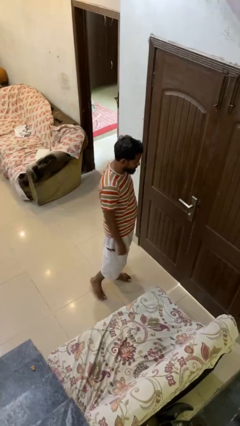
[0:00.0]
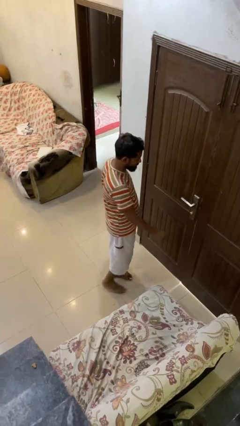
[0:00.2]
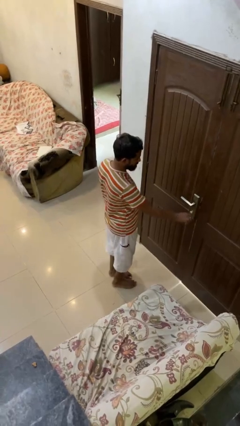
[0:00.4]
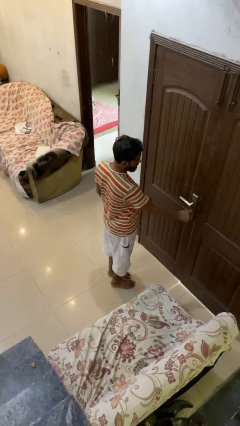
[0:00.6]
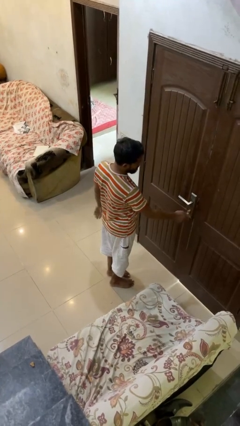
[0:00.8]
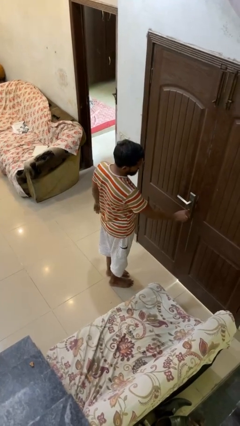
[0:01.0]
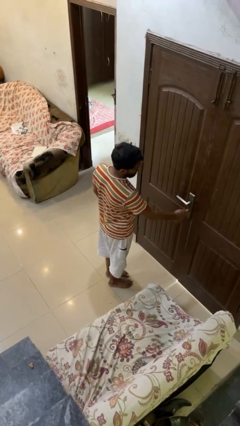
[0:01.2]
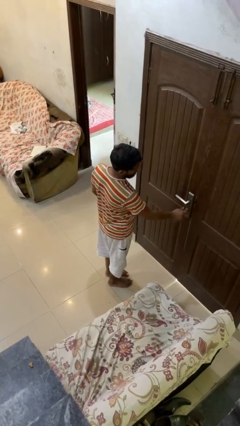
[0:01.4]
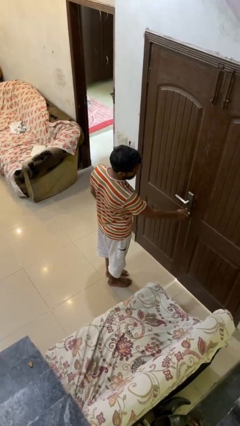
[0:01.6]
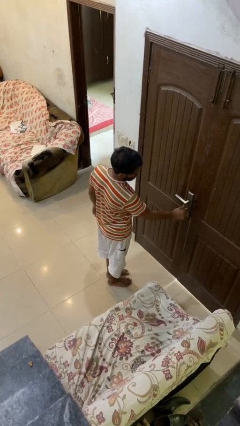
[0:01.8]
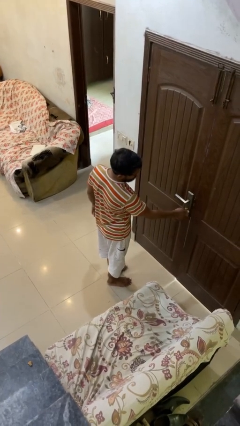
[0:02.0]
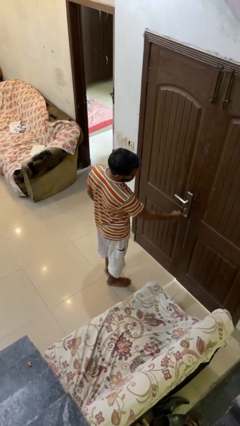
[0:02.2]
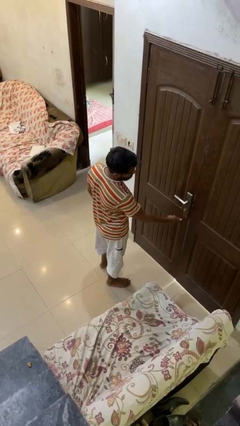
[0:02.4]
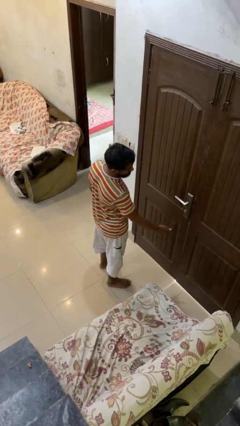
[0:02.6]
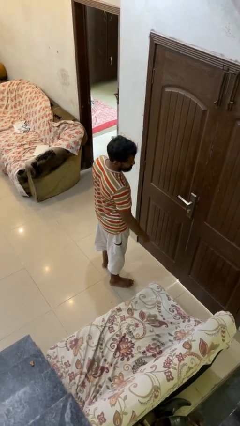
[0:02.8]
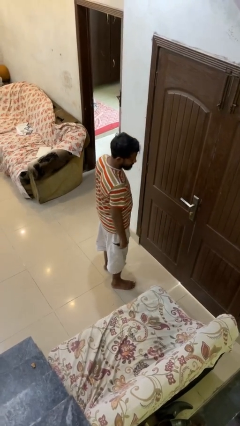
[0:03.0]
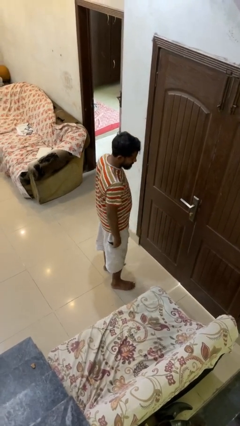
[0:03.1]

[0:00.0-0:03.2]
person locks door with keys

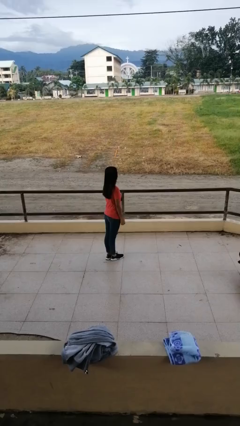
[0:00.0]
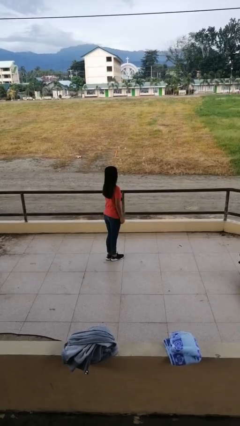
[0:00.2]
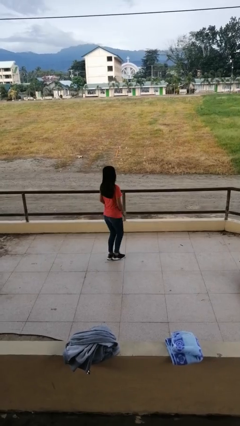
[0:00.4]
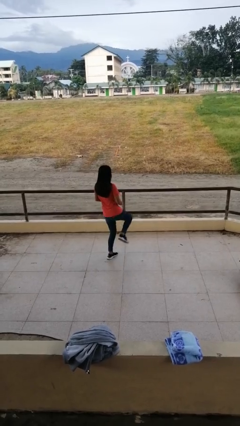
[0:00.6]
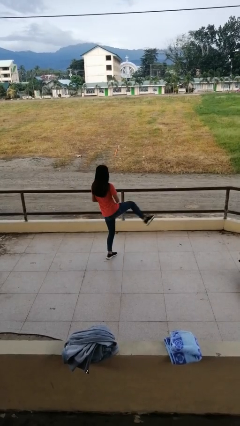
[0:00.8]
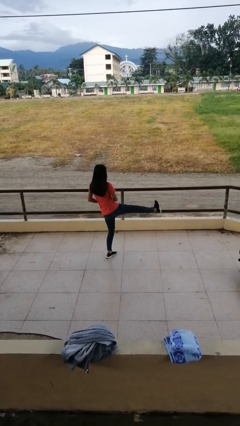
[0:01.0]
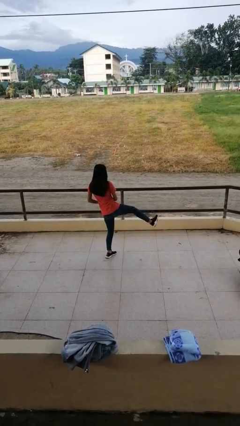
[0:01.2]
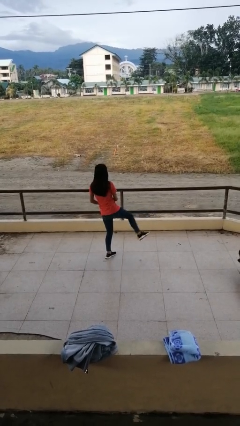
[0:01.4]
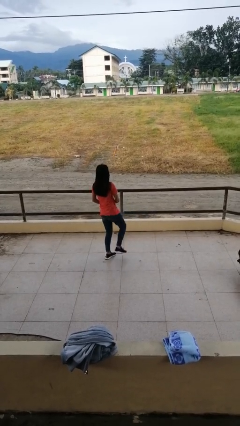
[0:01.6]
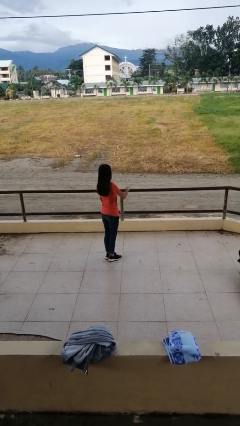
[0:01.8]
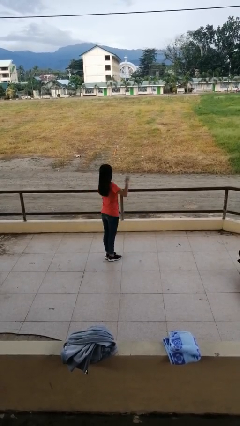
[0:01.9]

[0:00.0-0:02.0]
person karate kicks

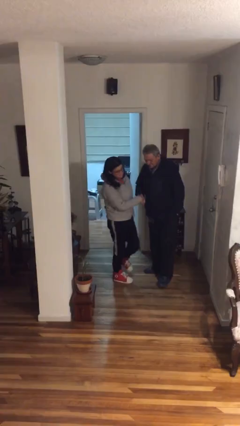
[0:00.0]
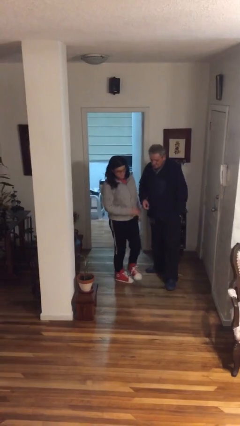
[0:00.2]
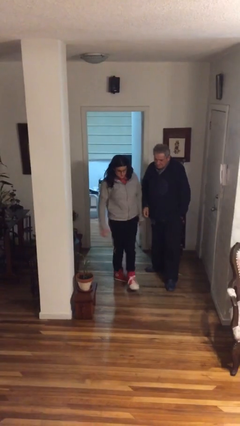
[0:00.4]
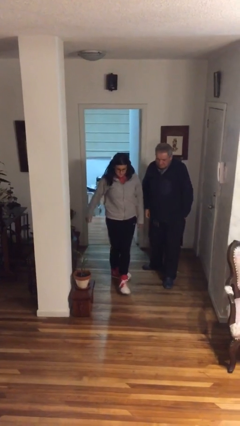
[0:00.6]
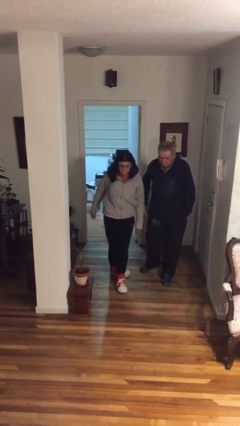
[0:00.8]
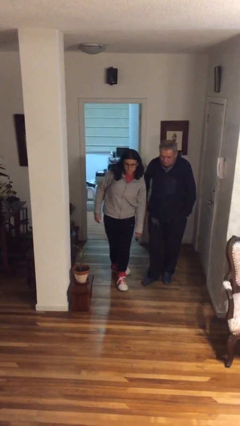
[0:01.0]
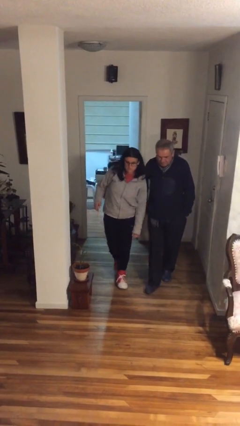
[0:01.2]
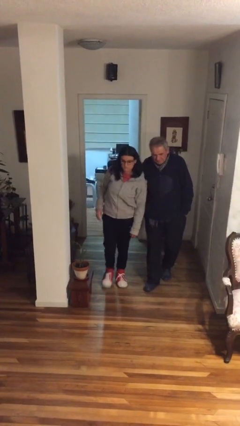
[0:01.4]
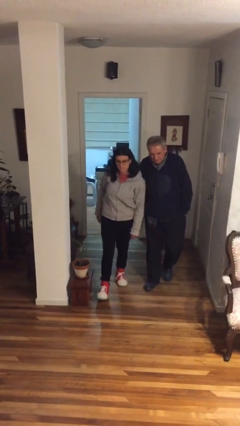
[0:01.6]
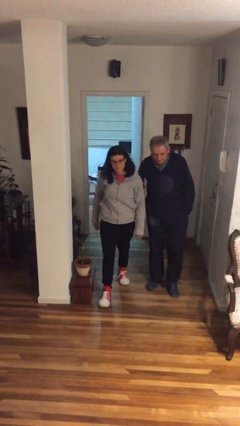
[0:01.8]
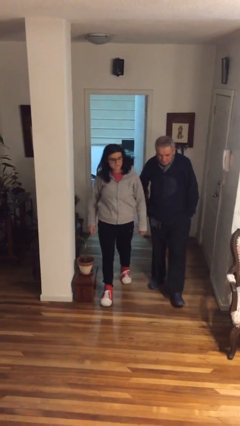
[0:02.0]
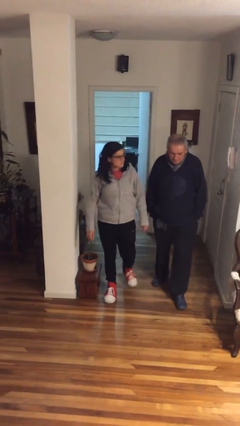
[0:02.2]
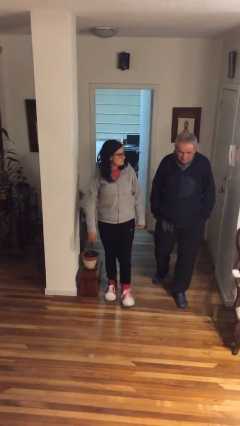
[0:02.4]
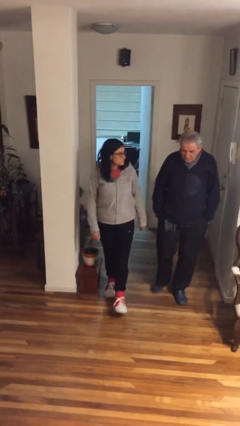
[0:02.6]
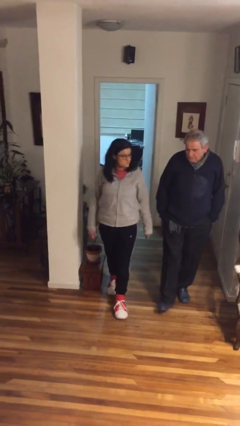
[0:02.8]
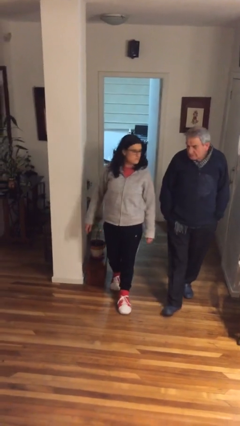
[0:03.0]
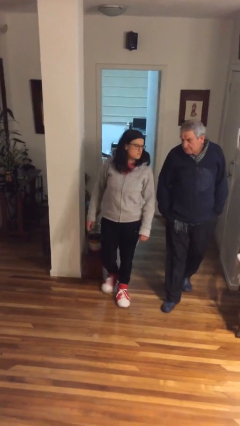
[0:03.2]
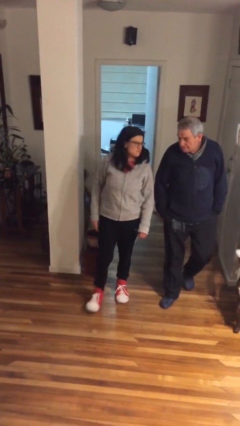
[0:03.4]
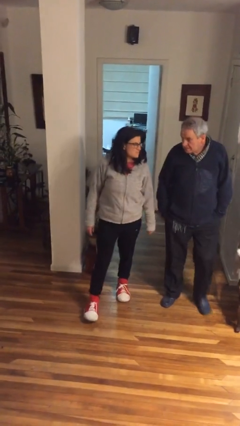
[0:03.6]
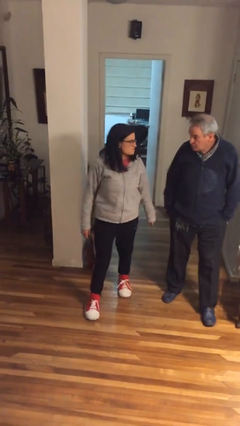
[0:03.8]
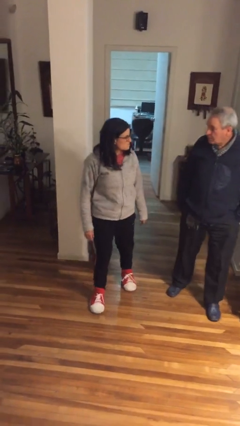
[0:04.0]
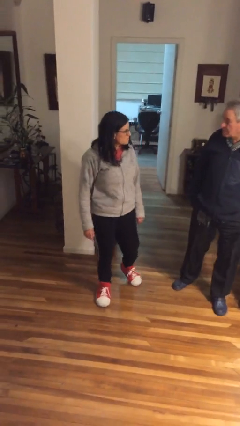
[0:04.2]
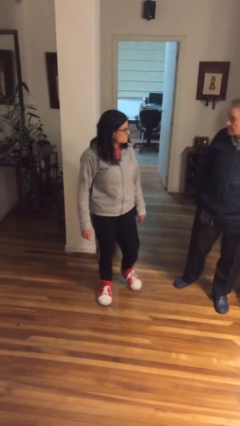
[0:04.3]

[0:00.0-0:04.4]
person talks to person

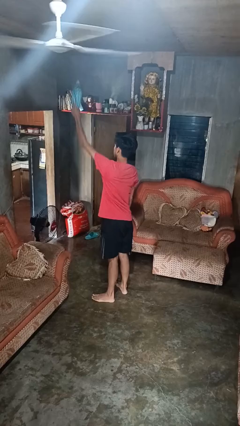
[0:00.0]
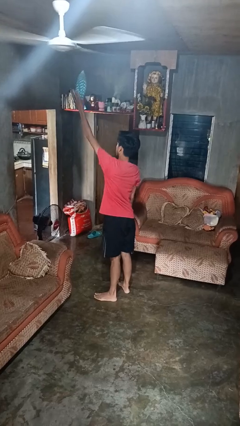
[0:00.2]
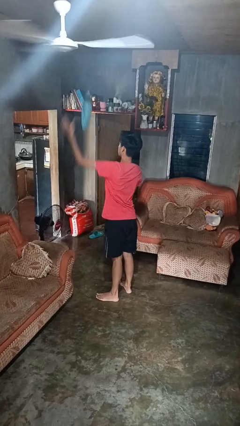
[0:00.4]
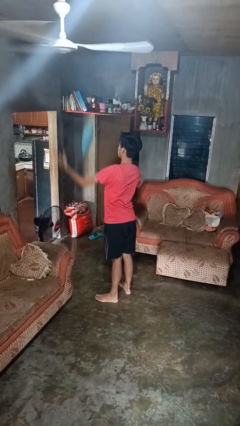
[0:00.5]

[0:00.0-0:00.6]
person drops object

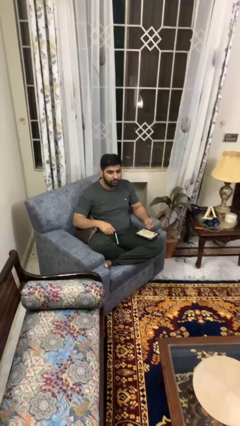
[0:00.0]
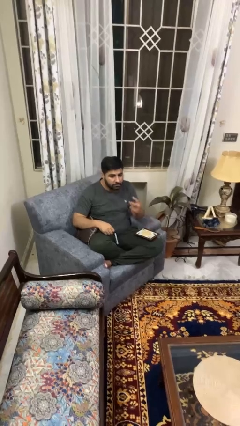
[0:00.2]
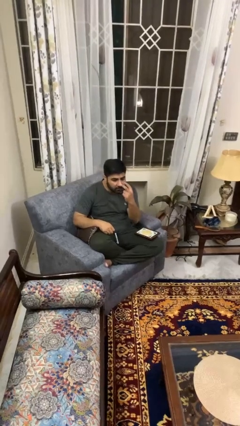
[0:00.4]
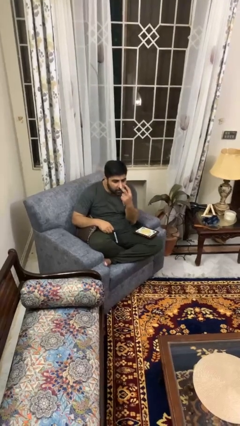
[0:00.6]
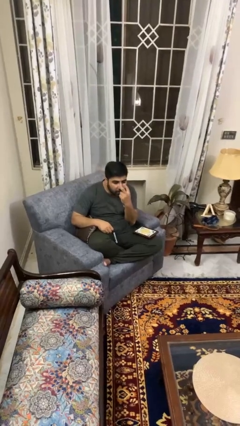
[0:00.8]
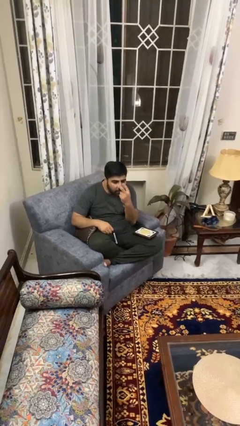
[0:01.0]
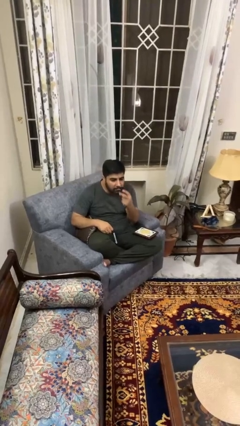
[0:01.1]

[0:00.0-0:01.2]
person gestures watch closely

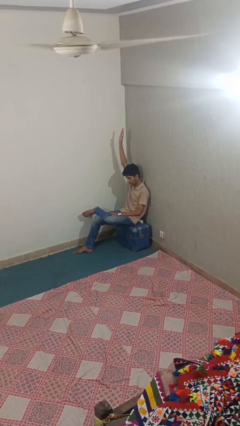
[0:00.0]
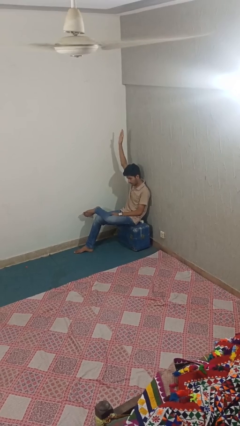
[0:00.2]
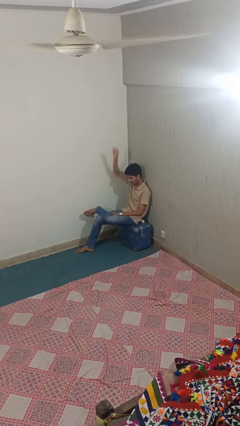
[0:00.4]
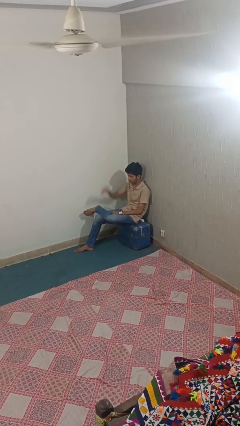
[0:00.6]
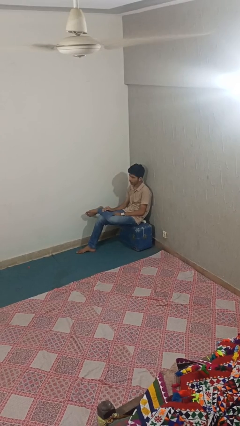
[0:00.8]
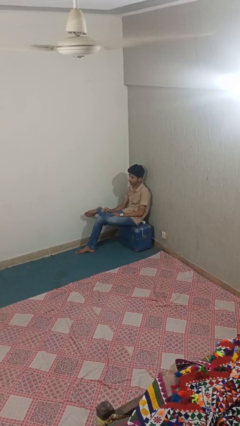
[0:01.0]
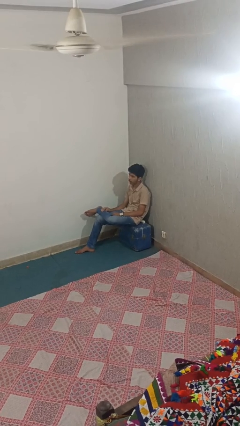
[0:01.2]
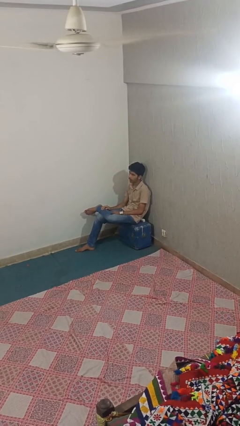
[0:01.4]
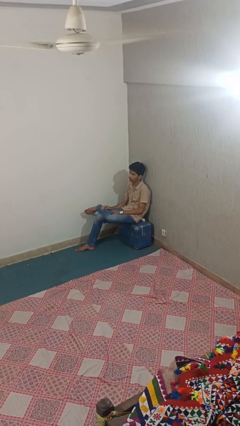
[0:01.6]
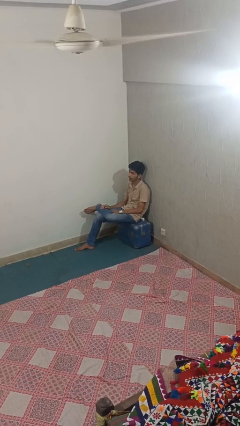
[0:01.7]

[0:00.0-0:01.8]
person gestures lower hand

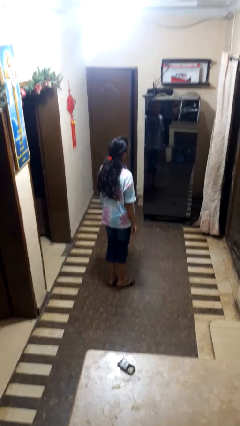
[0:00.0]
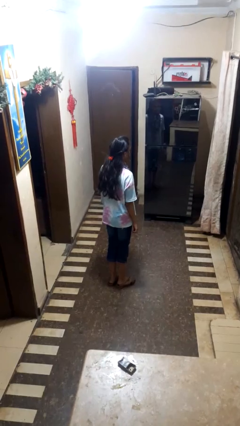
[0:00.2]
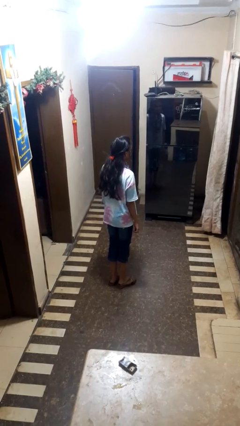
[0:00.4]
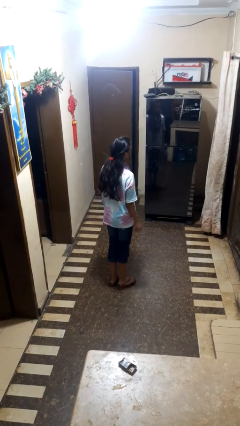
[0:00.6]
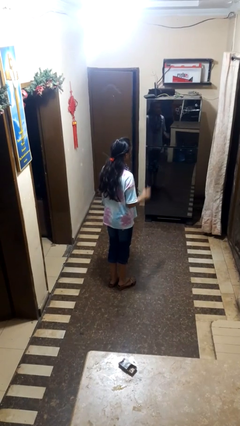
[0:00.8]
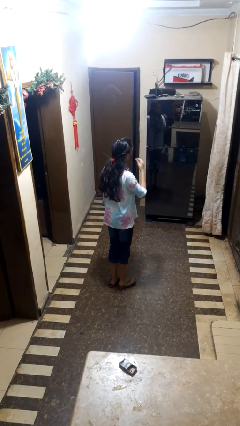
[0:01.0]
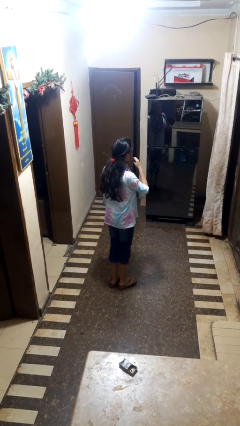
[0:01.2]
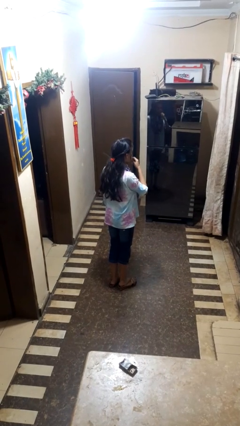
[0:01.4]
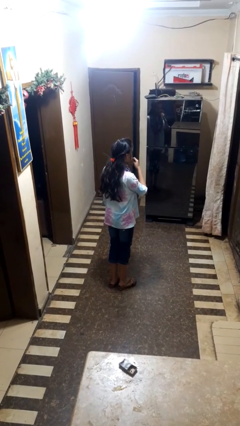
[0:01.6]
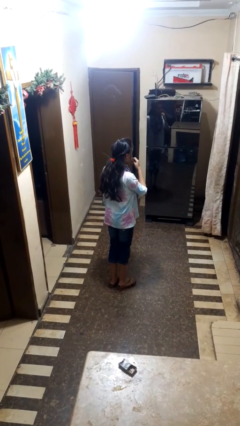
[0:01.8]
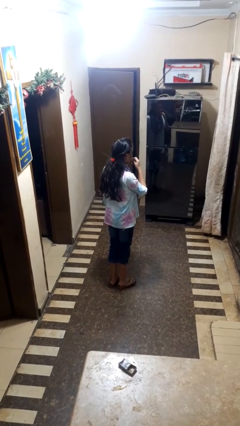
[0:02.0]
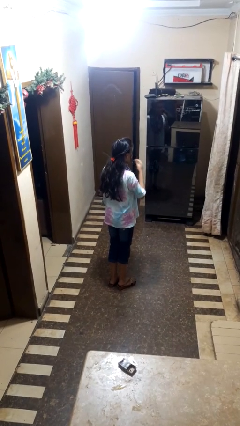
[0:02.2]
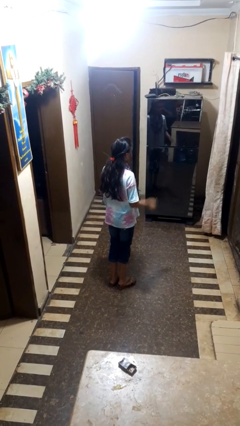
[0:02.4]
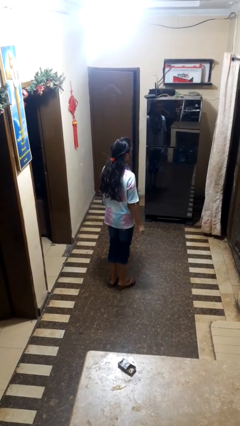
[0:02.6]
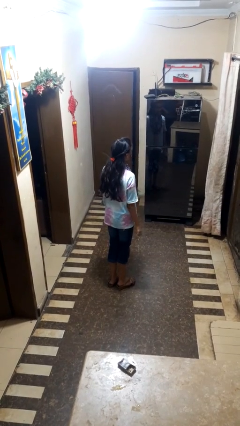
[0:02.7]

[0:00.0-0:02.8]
person flosses

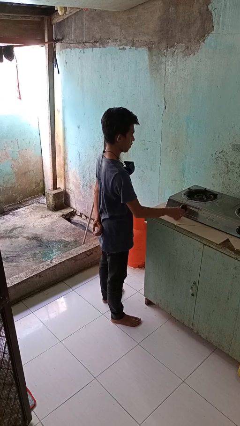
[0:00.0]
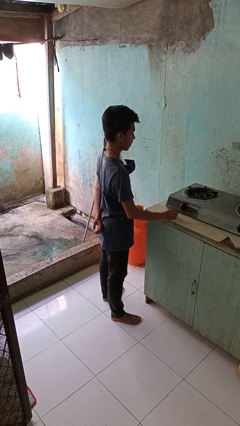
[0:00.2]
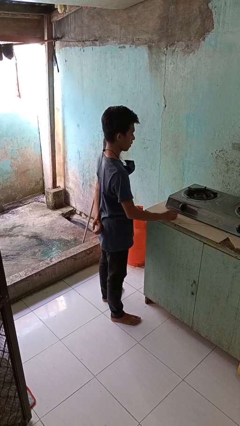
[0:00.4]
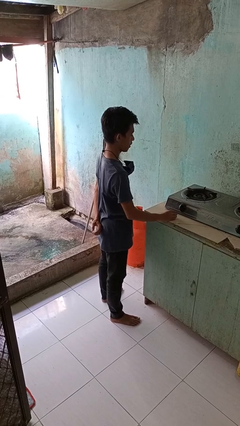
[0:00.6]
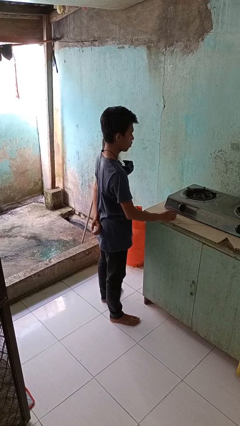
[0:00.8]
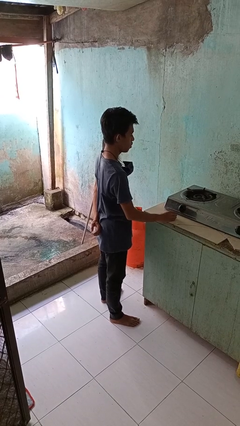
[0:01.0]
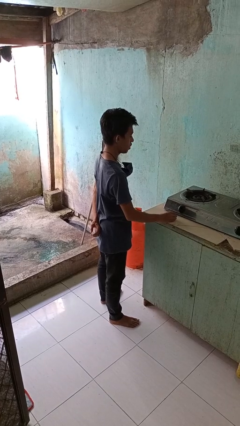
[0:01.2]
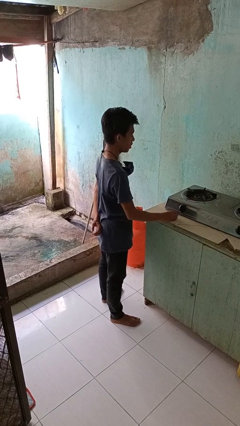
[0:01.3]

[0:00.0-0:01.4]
person turns off stovetop
